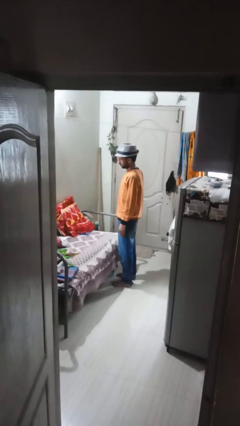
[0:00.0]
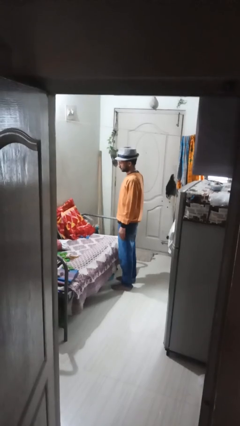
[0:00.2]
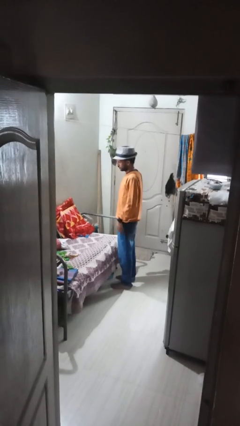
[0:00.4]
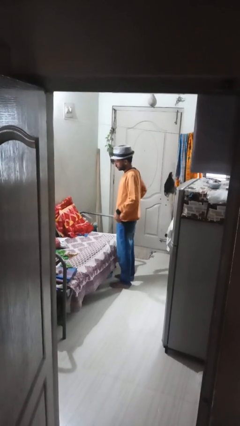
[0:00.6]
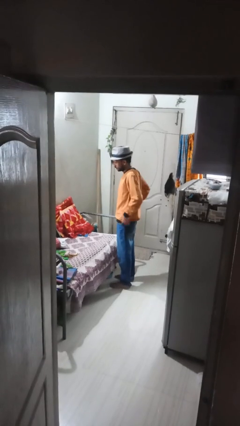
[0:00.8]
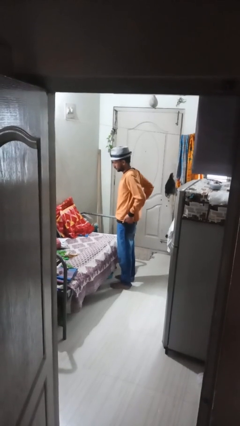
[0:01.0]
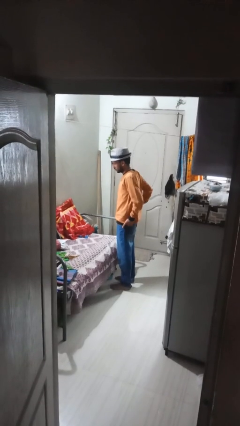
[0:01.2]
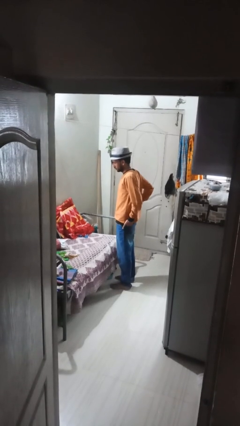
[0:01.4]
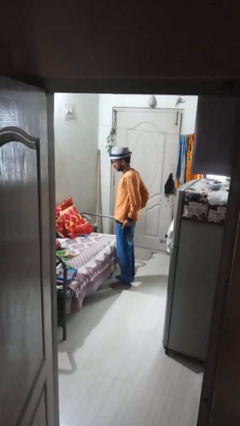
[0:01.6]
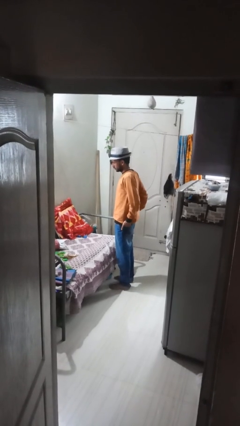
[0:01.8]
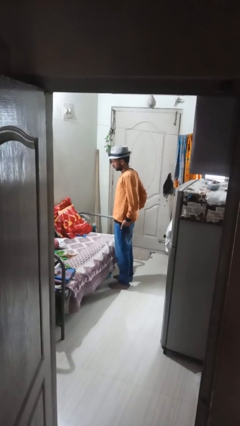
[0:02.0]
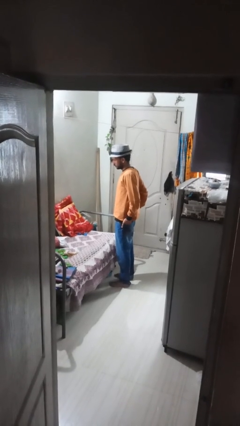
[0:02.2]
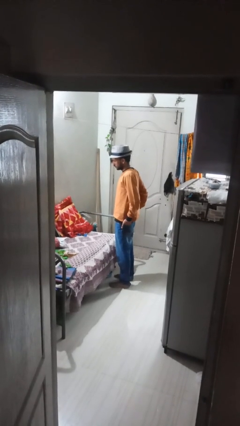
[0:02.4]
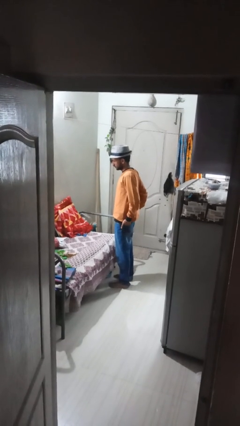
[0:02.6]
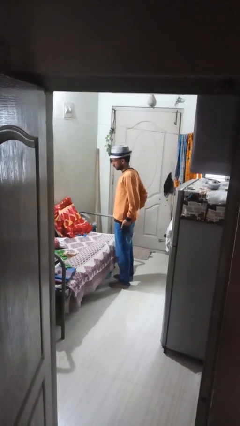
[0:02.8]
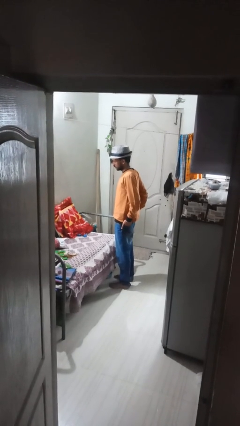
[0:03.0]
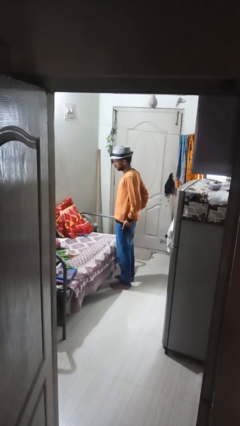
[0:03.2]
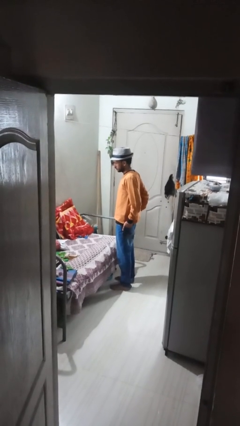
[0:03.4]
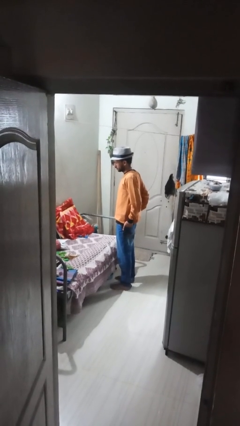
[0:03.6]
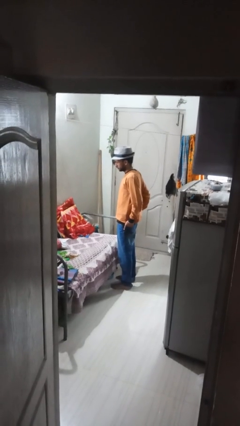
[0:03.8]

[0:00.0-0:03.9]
person puts hands in back pockets

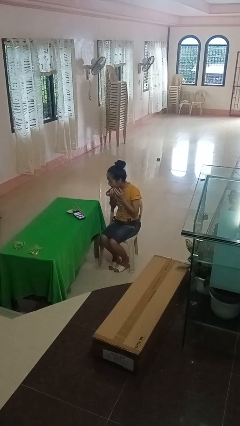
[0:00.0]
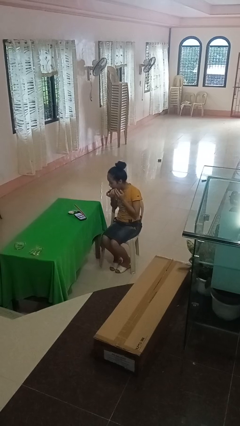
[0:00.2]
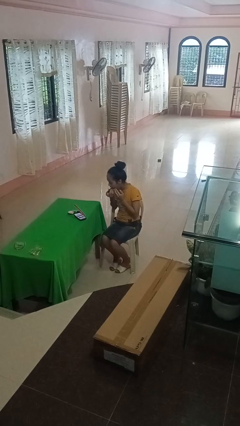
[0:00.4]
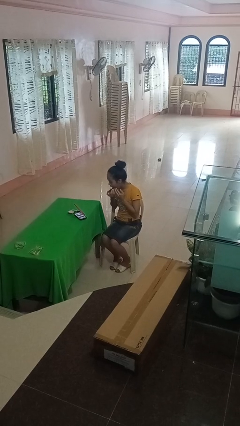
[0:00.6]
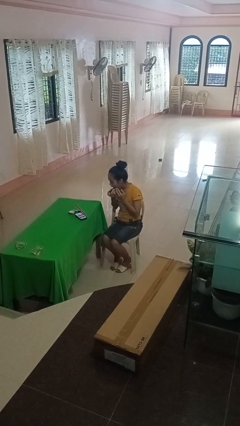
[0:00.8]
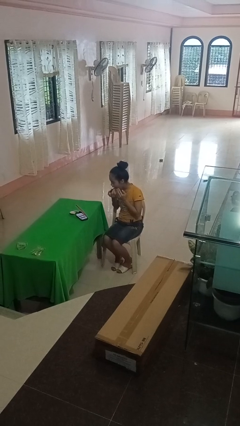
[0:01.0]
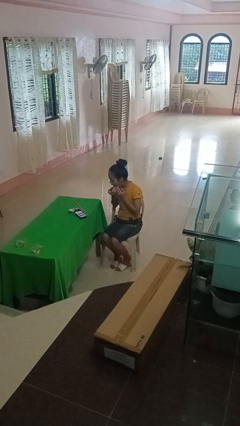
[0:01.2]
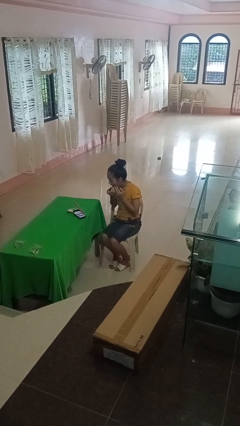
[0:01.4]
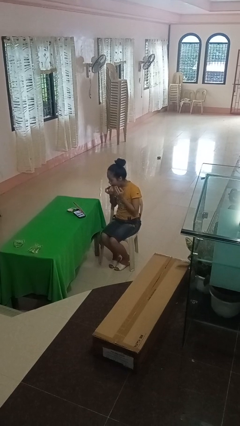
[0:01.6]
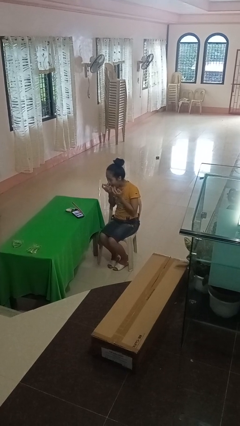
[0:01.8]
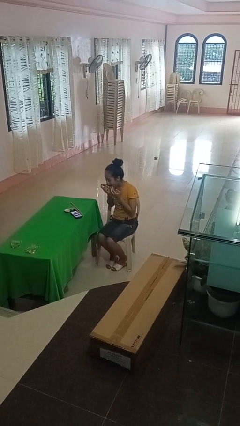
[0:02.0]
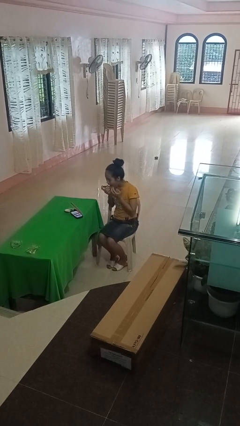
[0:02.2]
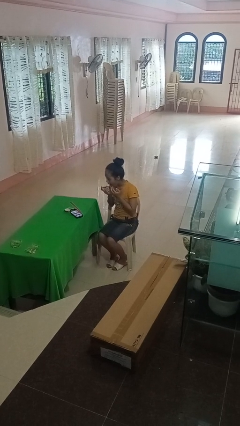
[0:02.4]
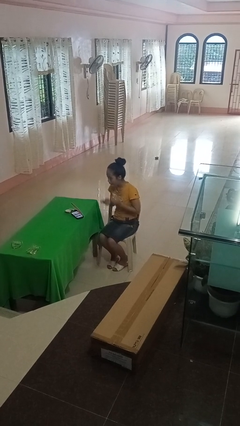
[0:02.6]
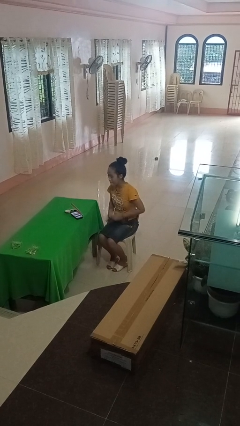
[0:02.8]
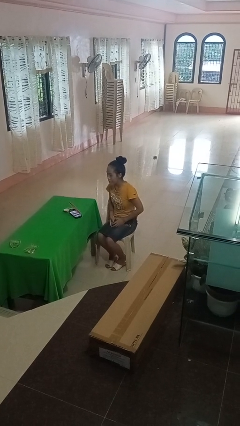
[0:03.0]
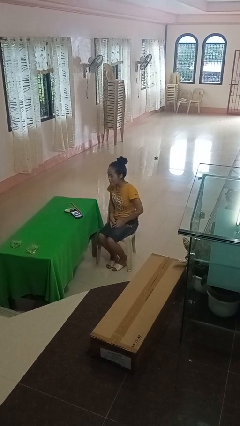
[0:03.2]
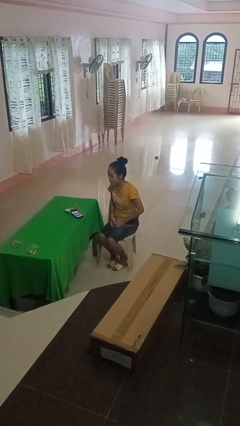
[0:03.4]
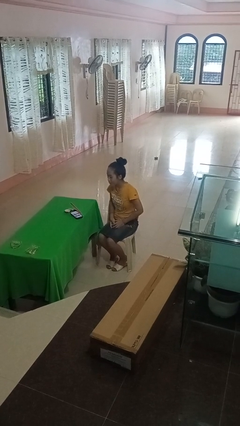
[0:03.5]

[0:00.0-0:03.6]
person applies lip makeup

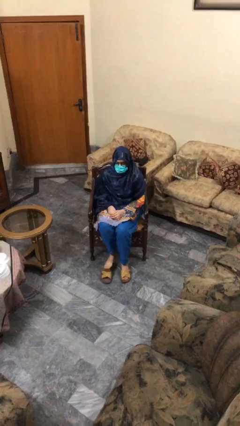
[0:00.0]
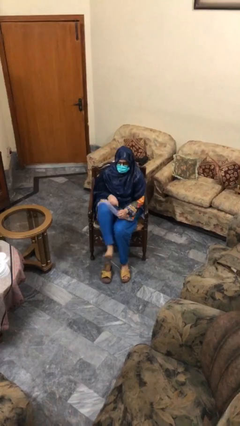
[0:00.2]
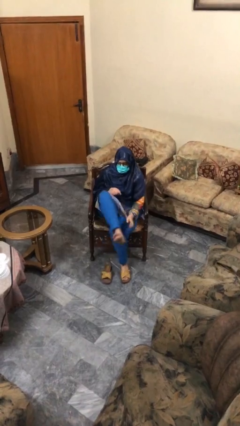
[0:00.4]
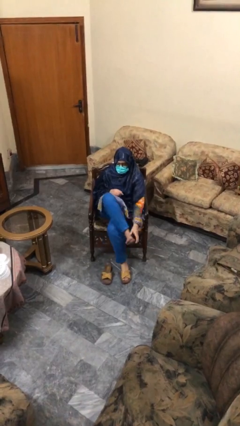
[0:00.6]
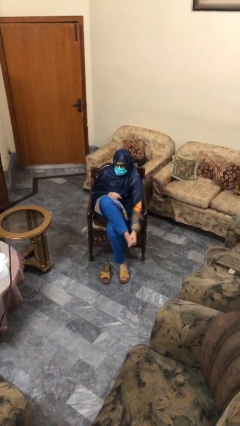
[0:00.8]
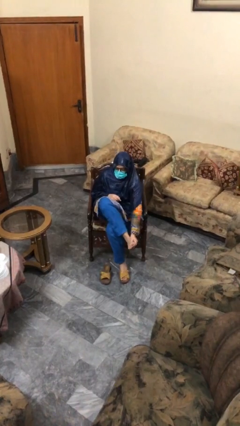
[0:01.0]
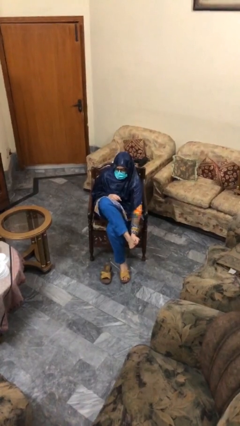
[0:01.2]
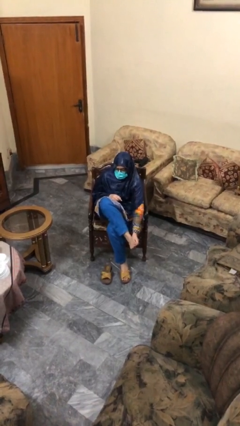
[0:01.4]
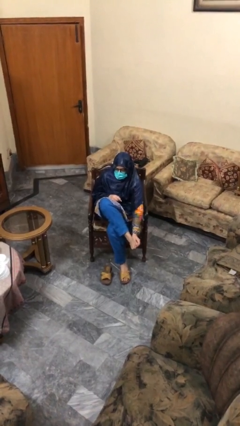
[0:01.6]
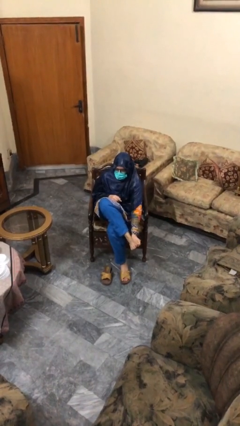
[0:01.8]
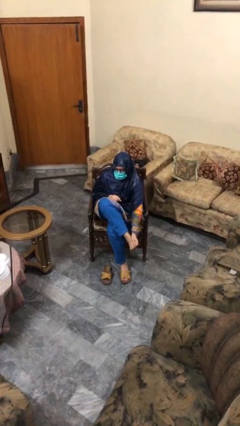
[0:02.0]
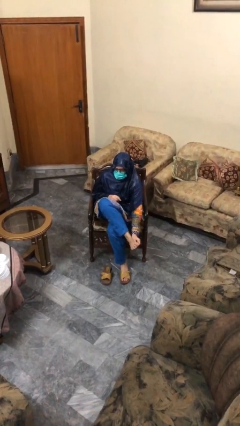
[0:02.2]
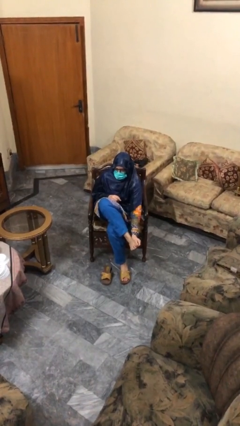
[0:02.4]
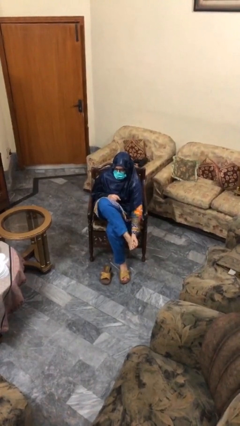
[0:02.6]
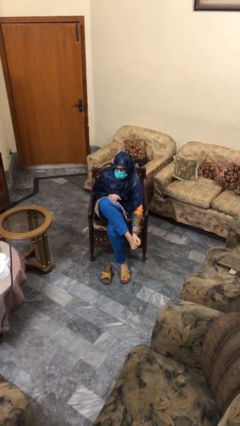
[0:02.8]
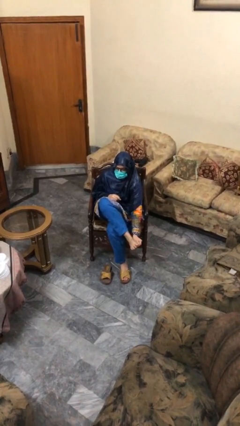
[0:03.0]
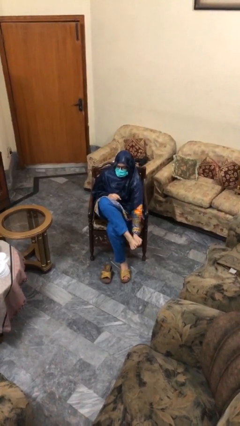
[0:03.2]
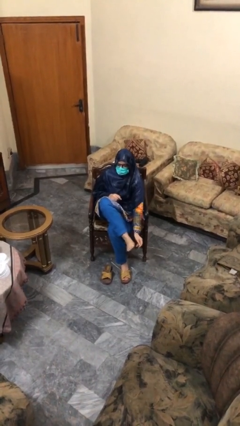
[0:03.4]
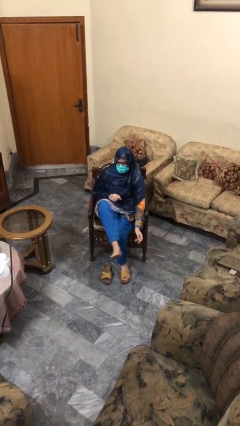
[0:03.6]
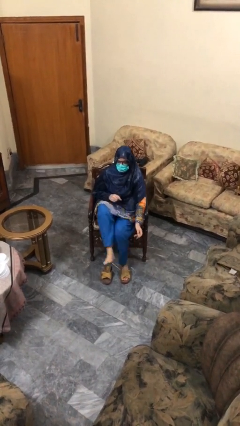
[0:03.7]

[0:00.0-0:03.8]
person rubs foot

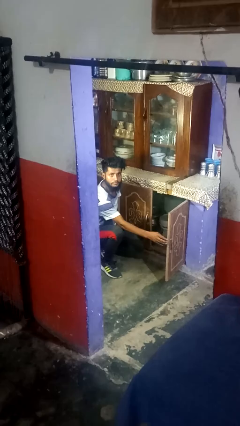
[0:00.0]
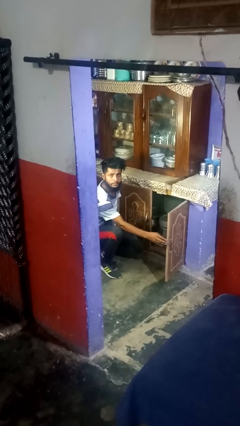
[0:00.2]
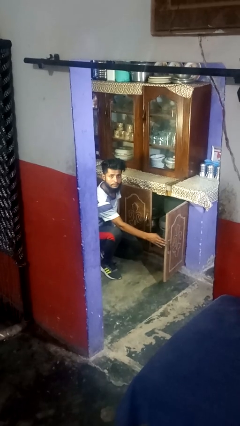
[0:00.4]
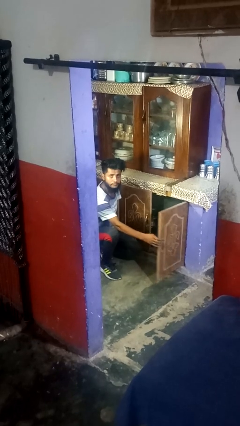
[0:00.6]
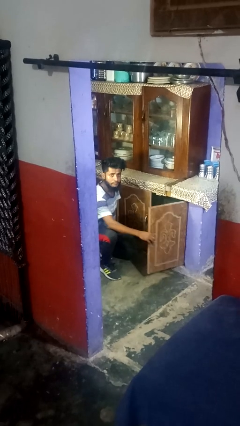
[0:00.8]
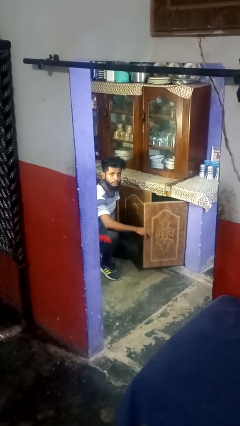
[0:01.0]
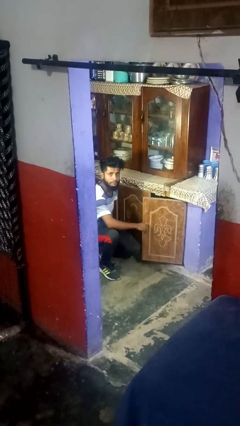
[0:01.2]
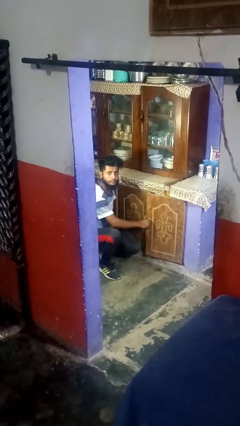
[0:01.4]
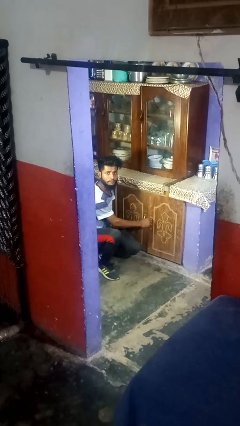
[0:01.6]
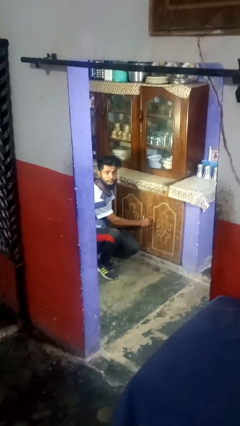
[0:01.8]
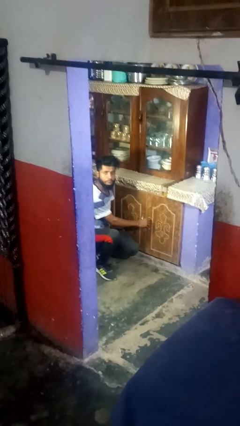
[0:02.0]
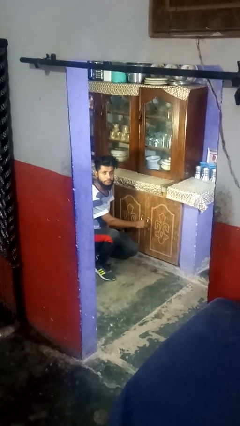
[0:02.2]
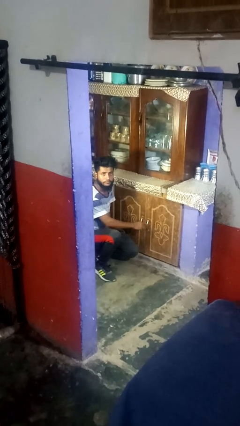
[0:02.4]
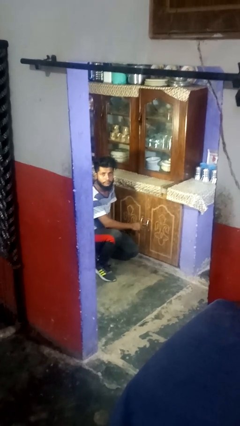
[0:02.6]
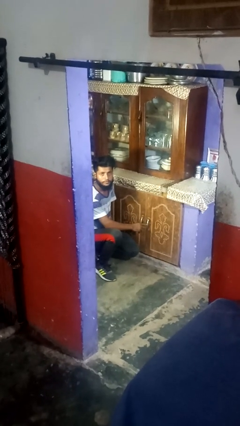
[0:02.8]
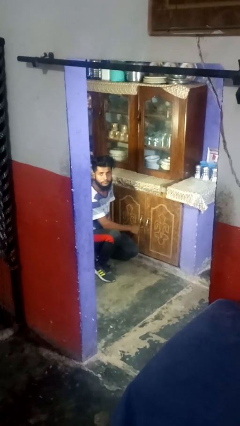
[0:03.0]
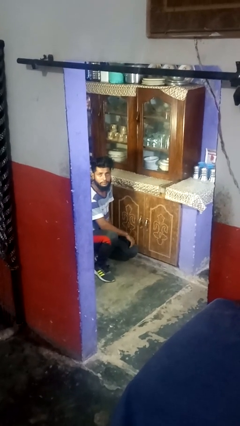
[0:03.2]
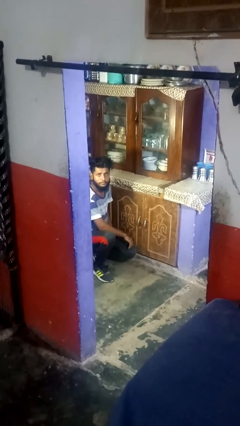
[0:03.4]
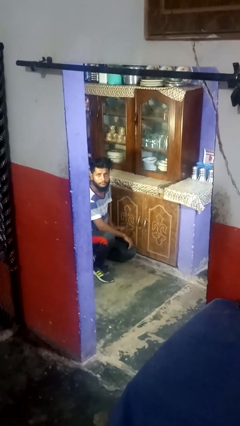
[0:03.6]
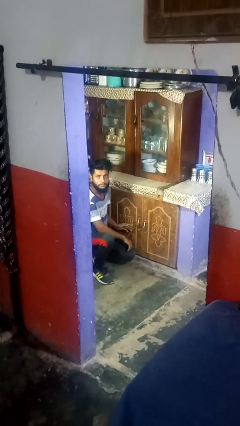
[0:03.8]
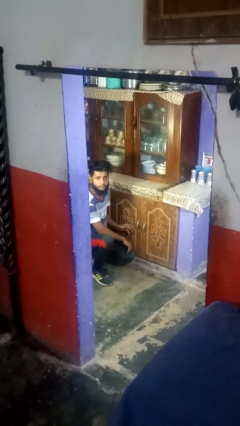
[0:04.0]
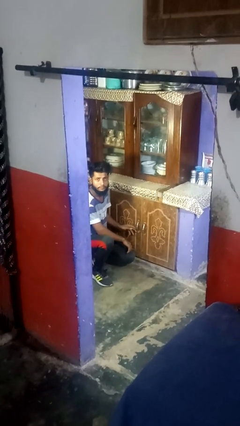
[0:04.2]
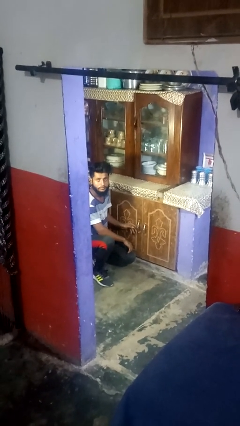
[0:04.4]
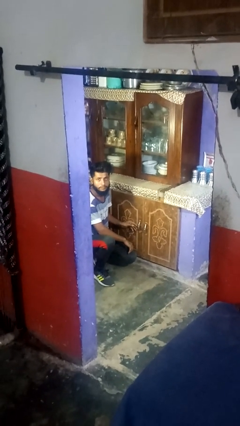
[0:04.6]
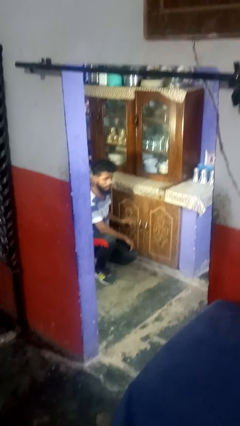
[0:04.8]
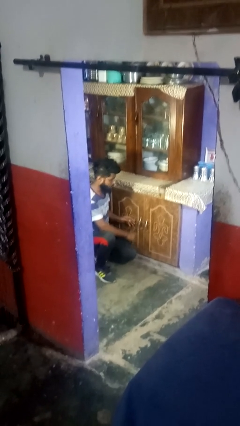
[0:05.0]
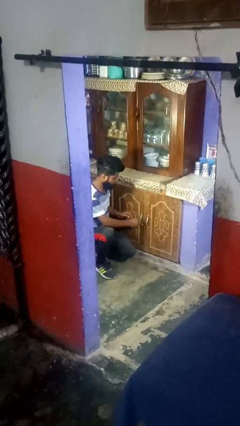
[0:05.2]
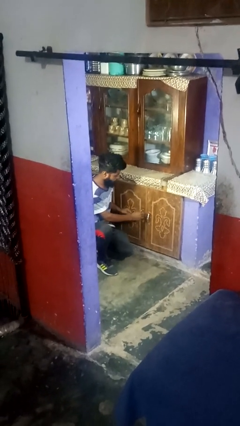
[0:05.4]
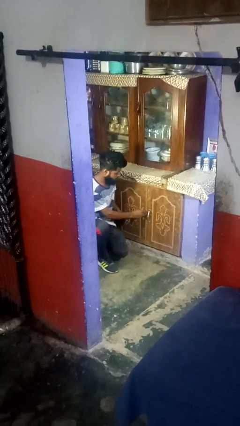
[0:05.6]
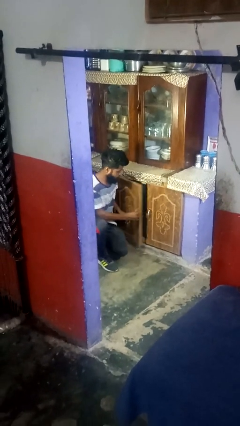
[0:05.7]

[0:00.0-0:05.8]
person closes cabinet

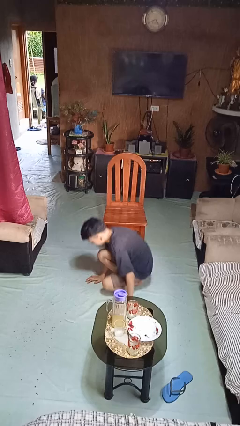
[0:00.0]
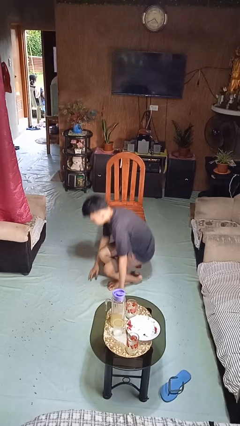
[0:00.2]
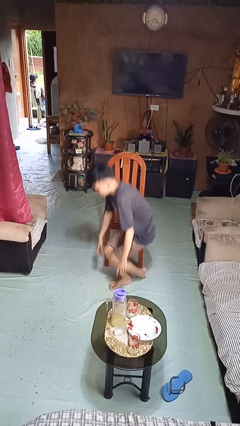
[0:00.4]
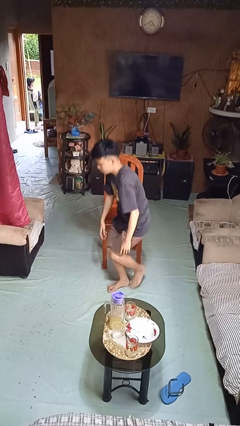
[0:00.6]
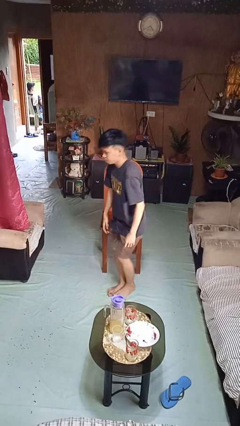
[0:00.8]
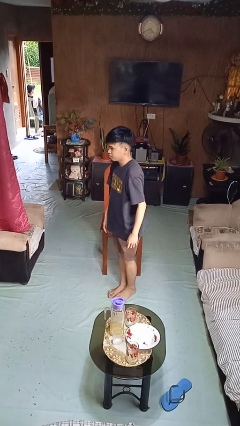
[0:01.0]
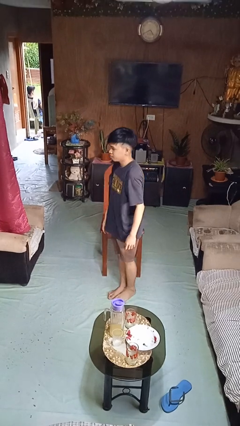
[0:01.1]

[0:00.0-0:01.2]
person stands up from floor
